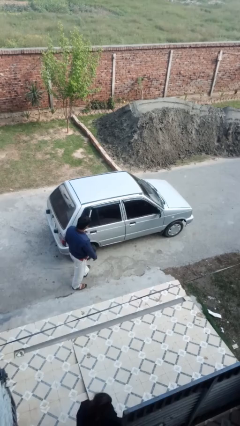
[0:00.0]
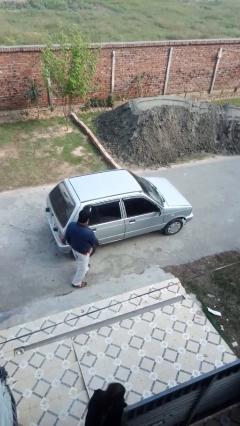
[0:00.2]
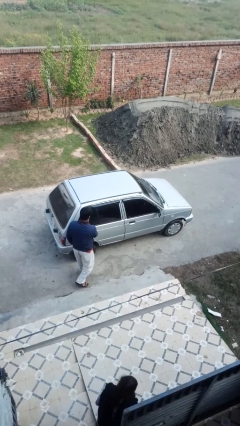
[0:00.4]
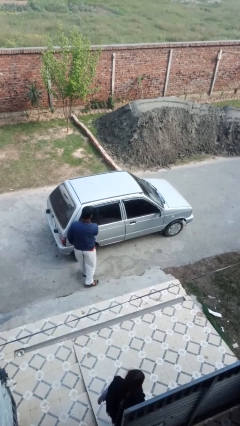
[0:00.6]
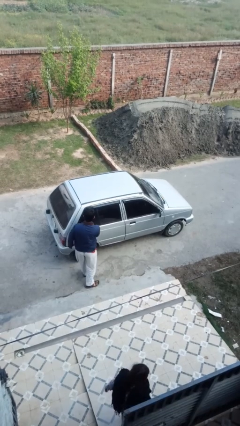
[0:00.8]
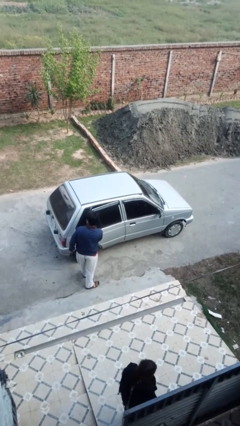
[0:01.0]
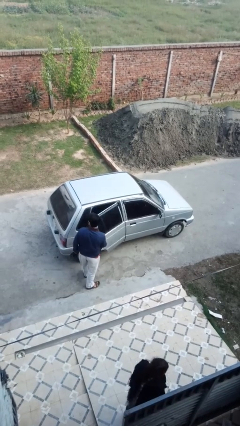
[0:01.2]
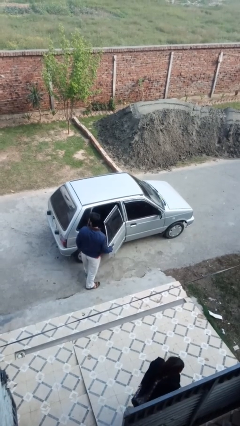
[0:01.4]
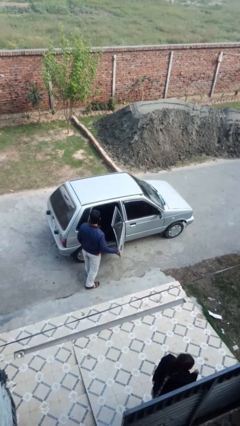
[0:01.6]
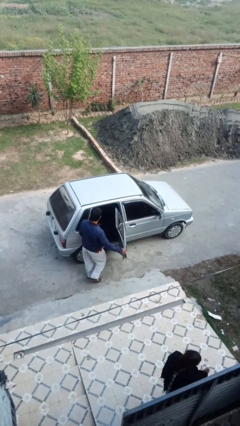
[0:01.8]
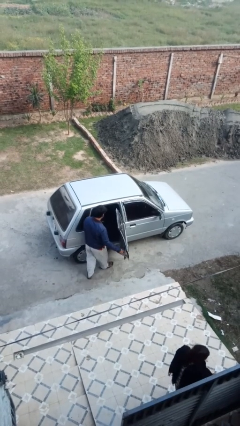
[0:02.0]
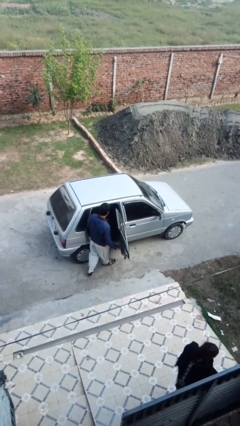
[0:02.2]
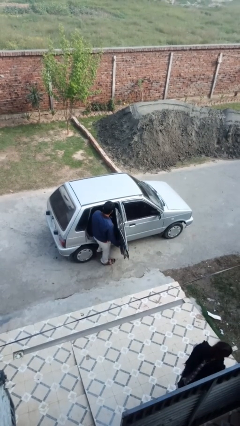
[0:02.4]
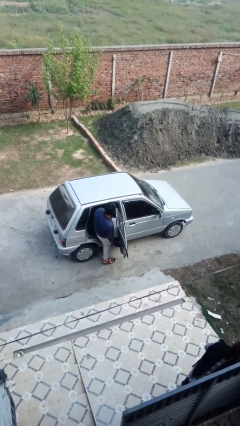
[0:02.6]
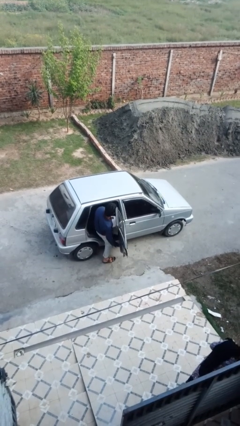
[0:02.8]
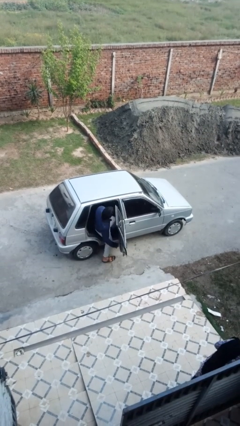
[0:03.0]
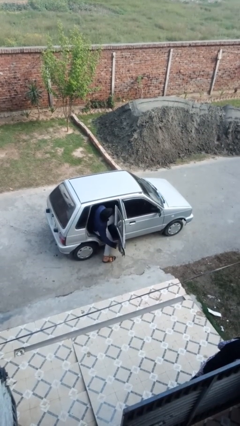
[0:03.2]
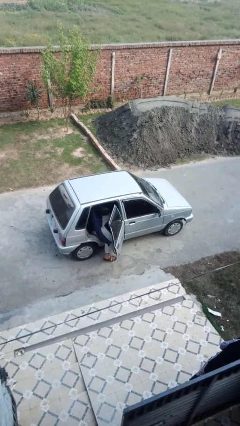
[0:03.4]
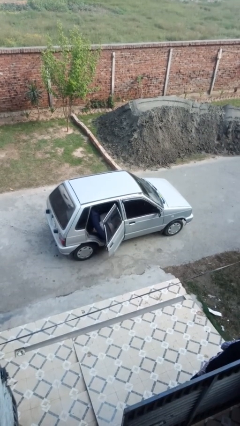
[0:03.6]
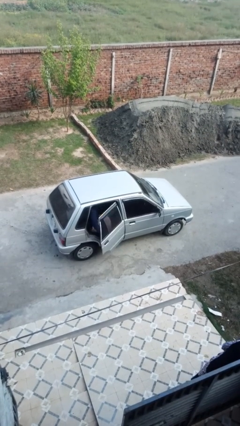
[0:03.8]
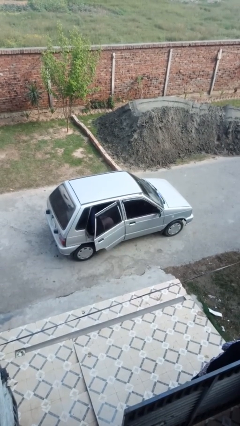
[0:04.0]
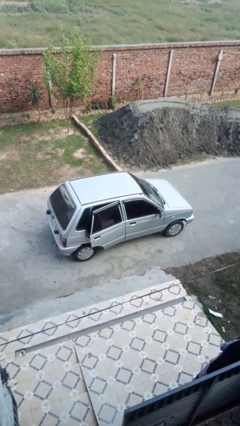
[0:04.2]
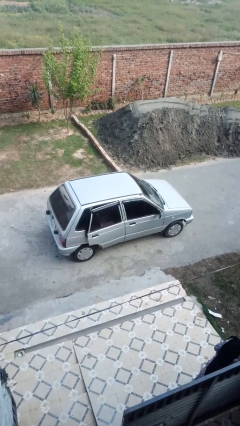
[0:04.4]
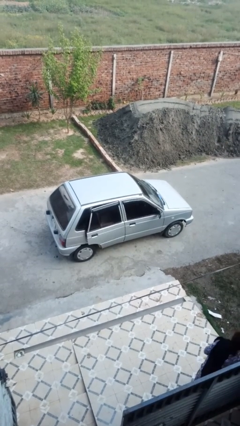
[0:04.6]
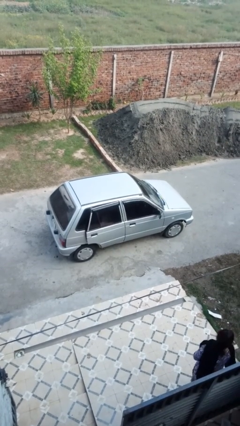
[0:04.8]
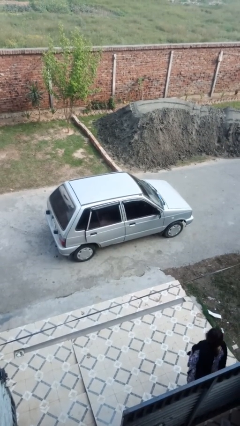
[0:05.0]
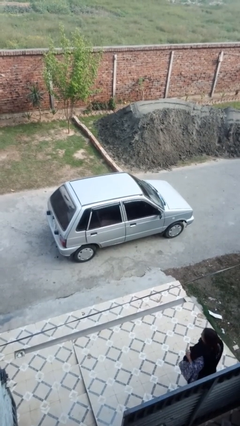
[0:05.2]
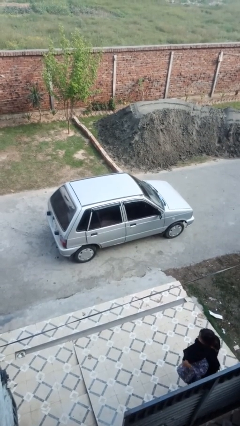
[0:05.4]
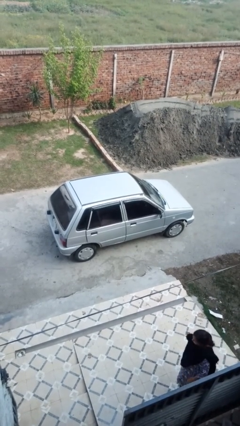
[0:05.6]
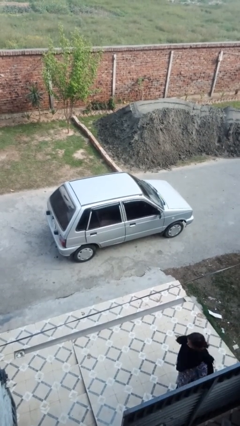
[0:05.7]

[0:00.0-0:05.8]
car picks up person

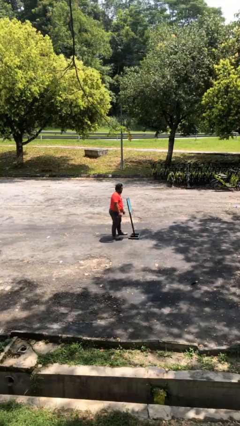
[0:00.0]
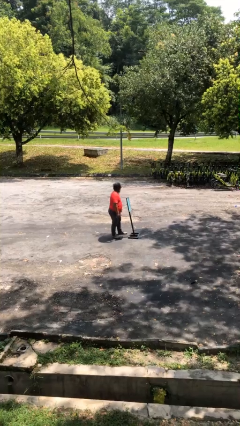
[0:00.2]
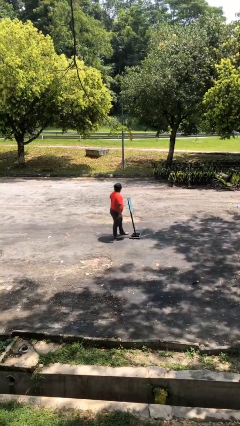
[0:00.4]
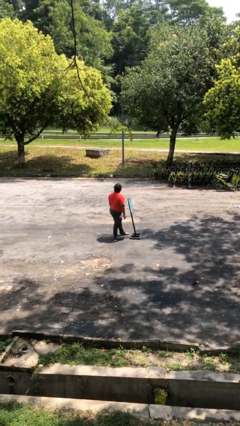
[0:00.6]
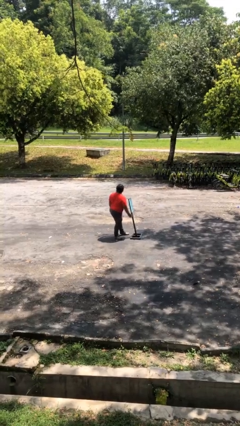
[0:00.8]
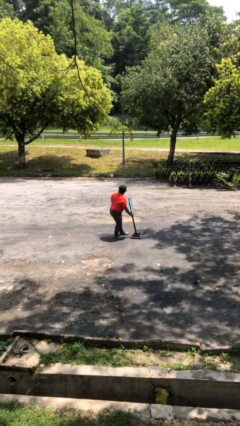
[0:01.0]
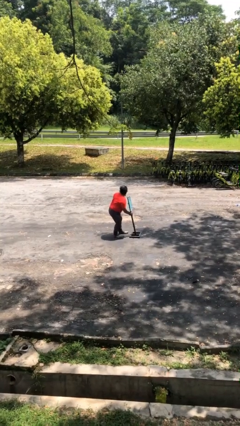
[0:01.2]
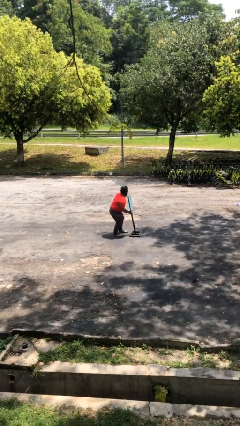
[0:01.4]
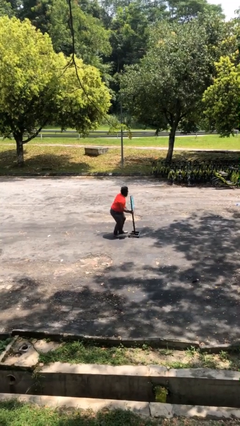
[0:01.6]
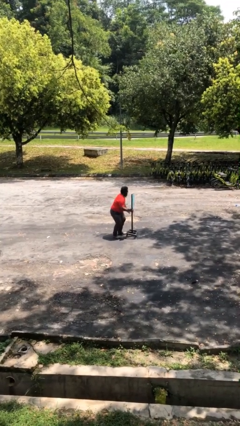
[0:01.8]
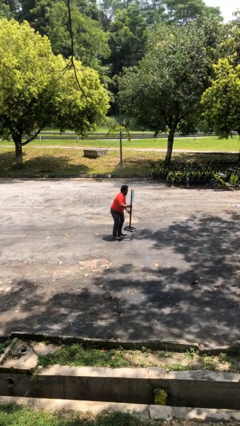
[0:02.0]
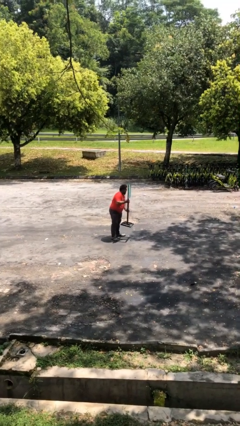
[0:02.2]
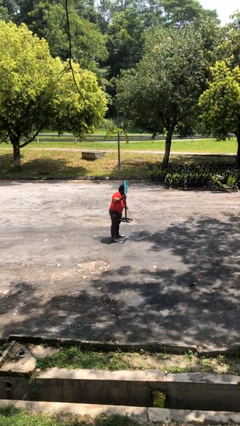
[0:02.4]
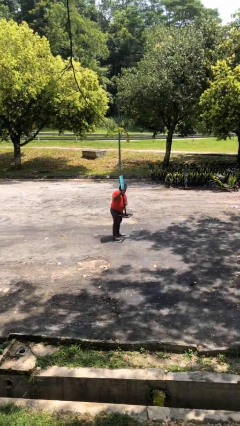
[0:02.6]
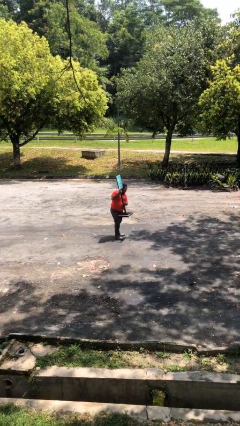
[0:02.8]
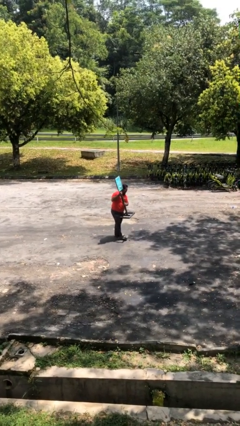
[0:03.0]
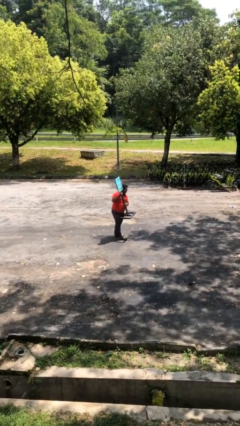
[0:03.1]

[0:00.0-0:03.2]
person picks up object from floor

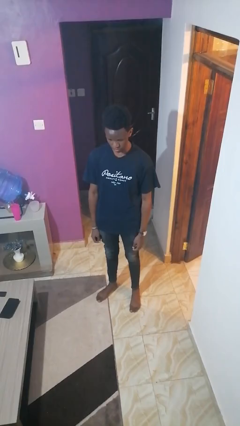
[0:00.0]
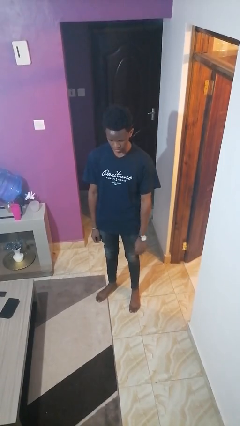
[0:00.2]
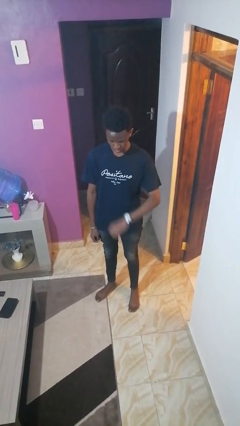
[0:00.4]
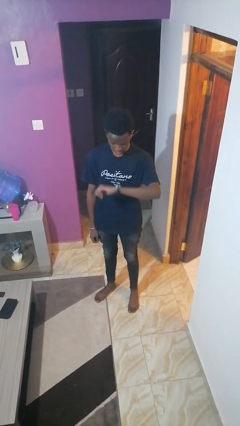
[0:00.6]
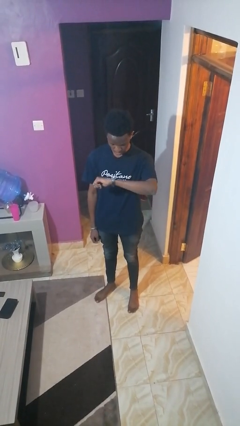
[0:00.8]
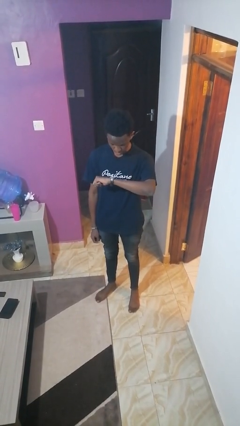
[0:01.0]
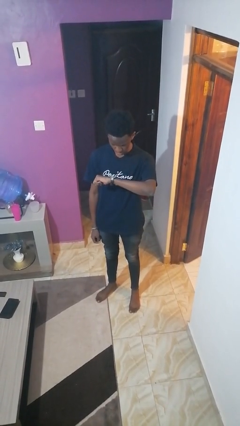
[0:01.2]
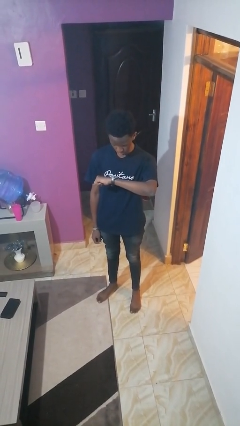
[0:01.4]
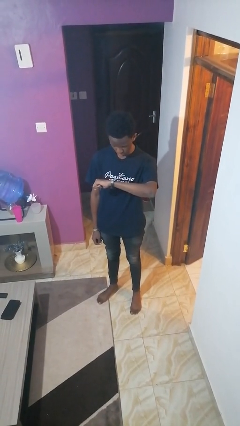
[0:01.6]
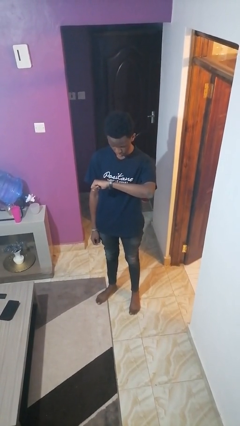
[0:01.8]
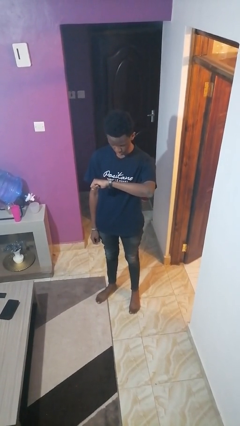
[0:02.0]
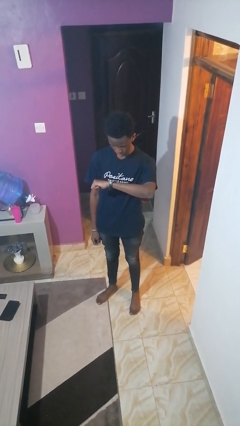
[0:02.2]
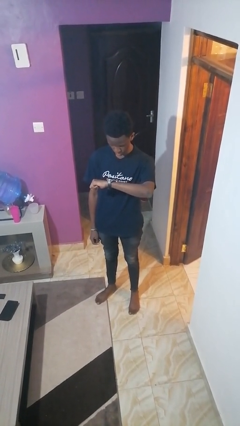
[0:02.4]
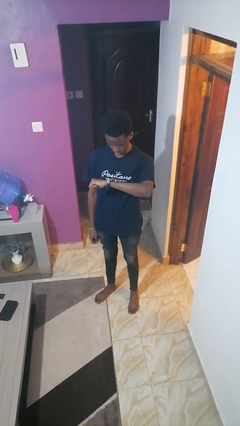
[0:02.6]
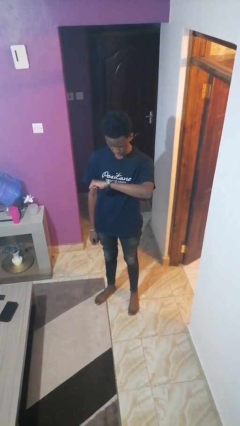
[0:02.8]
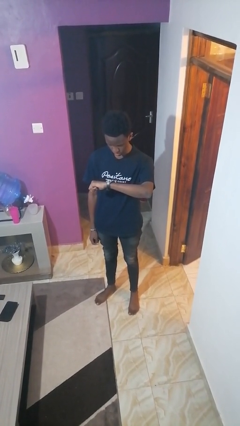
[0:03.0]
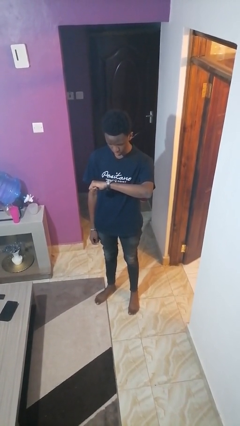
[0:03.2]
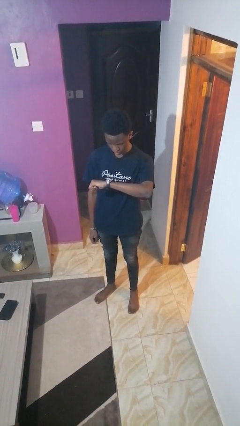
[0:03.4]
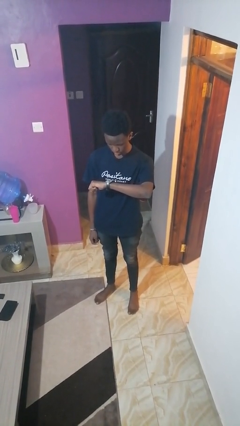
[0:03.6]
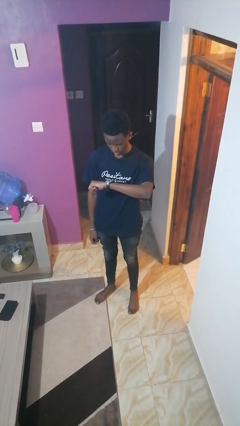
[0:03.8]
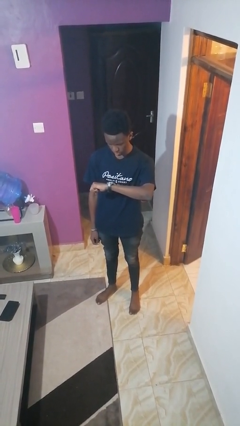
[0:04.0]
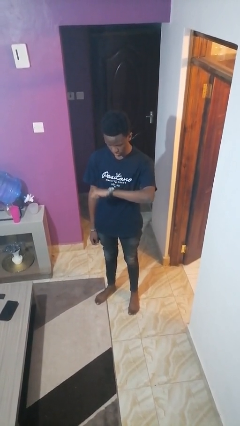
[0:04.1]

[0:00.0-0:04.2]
person looks at wristwatch

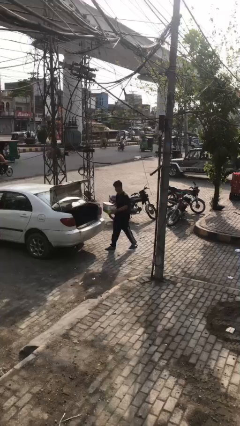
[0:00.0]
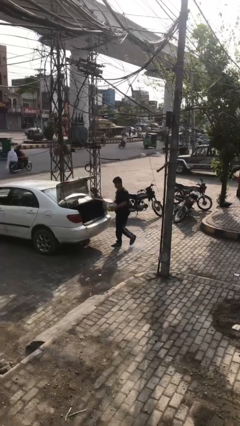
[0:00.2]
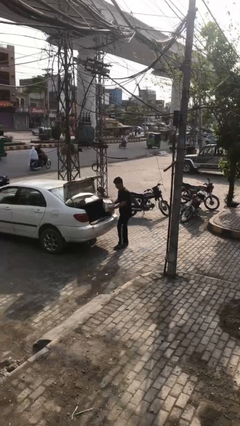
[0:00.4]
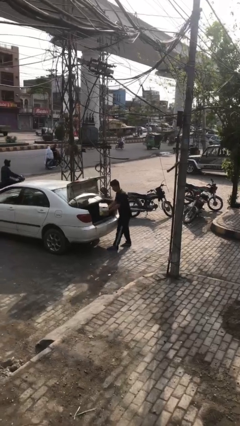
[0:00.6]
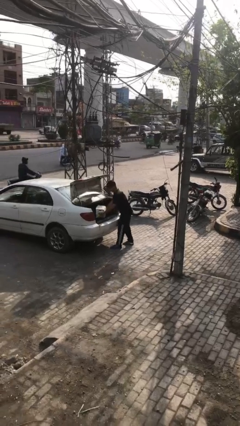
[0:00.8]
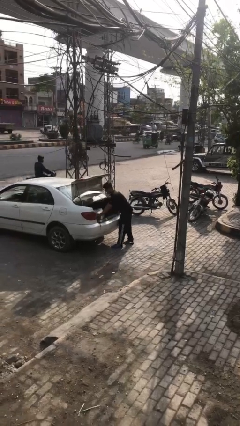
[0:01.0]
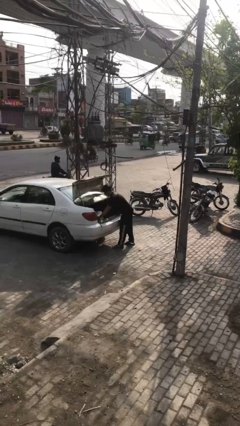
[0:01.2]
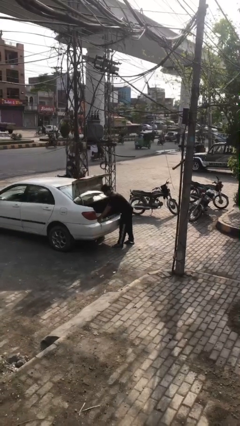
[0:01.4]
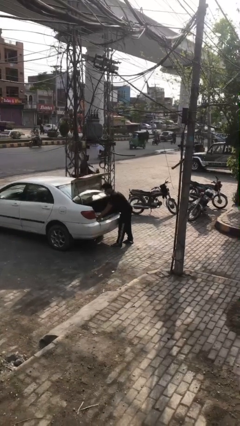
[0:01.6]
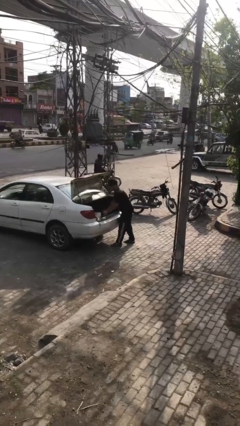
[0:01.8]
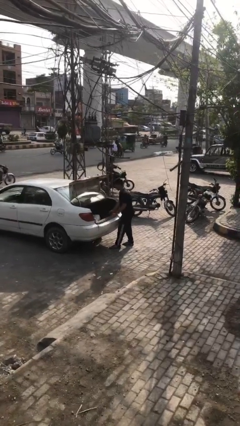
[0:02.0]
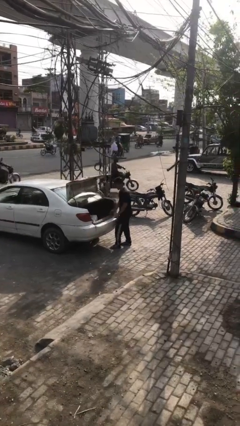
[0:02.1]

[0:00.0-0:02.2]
person loads car

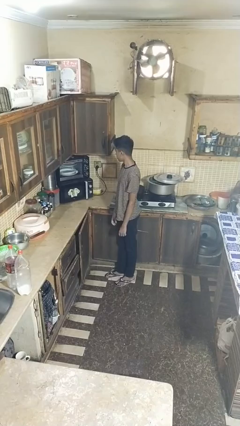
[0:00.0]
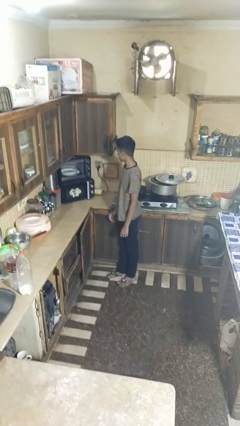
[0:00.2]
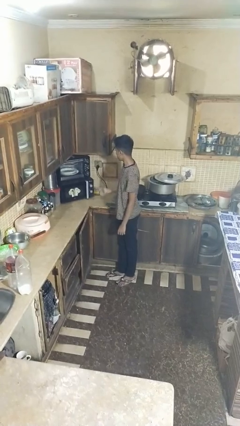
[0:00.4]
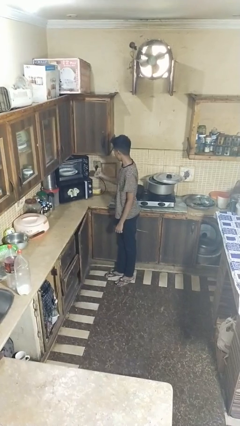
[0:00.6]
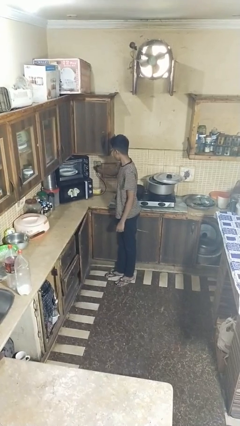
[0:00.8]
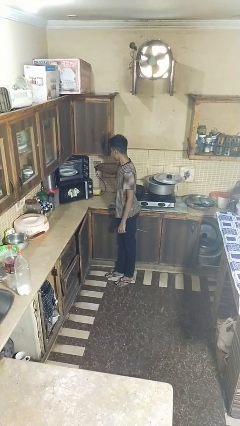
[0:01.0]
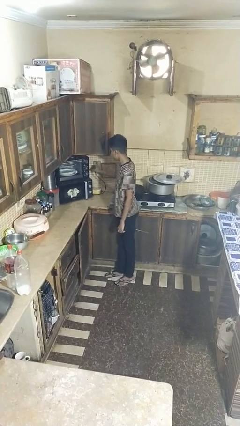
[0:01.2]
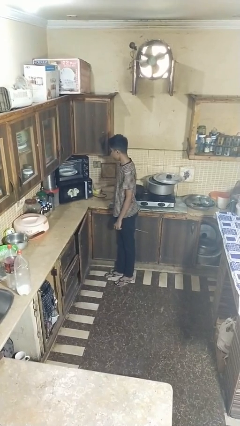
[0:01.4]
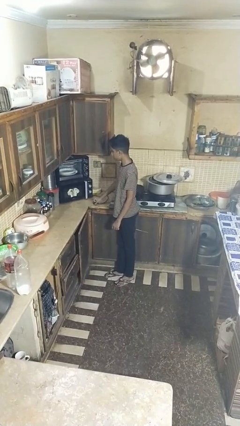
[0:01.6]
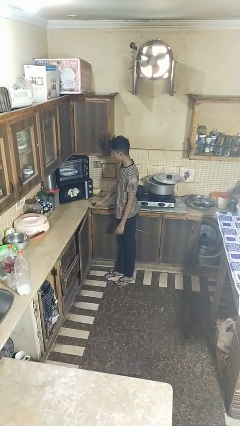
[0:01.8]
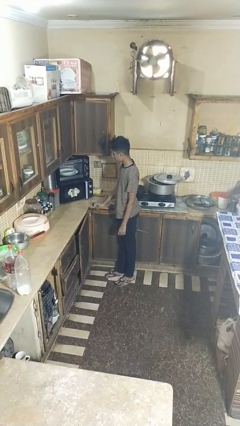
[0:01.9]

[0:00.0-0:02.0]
person unplugs from electrical socket
